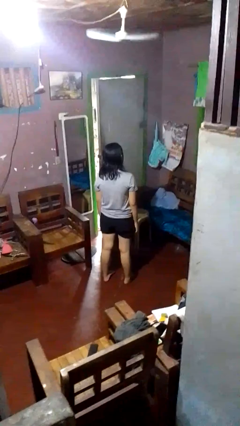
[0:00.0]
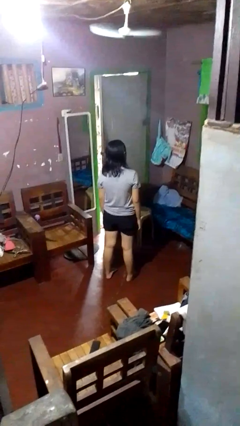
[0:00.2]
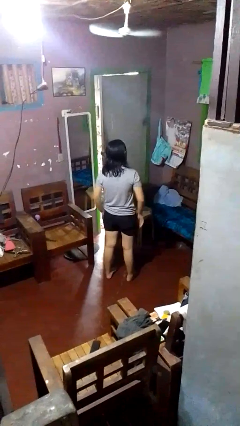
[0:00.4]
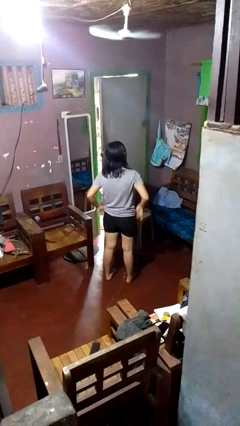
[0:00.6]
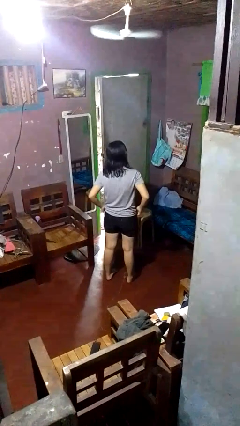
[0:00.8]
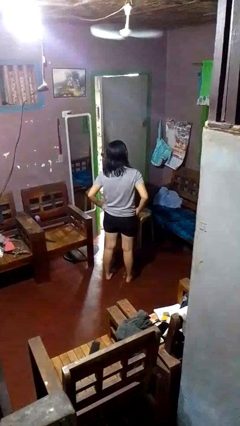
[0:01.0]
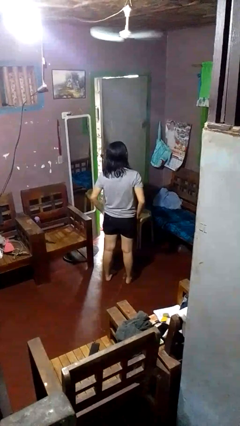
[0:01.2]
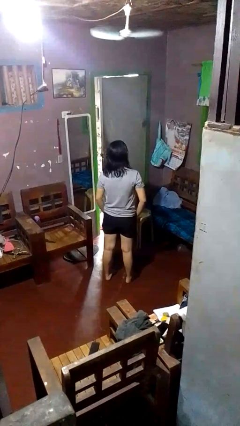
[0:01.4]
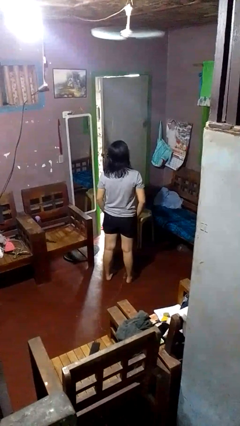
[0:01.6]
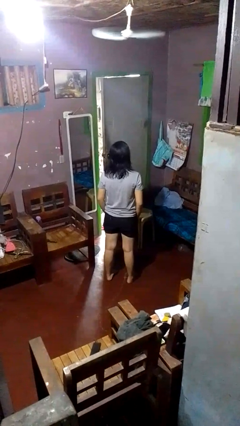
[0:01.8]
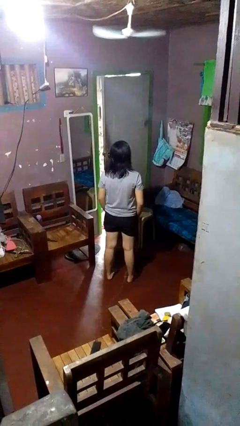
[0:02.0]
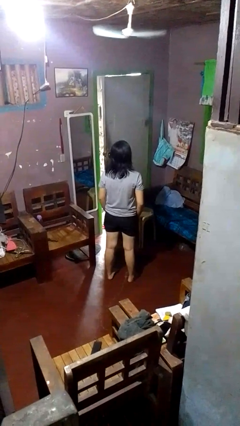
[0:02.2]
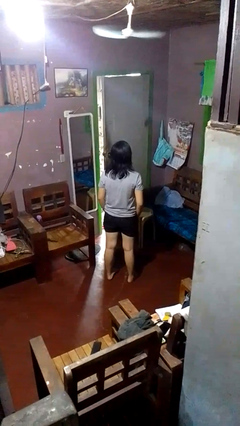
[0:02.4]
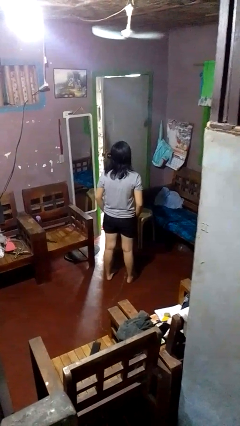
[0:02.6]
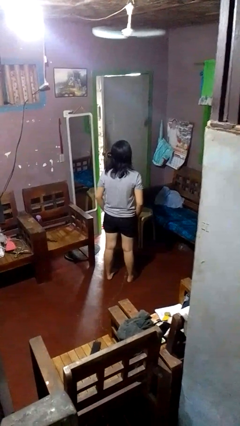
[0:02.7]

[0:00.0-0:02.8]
person puts hands in back pockets

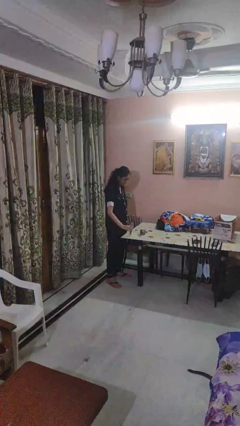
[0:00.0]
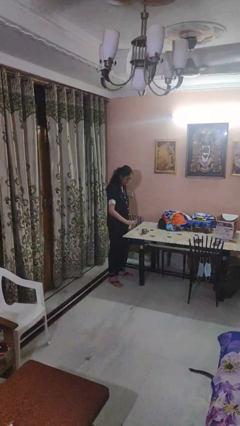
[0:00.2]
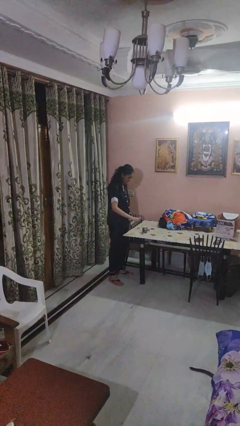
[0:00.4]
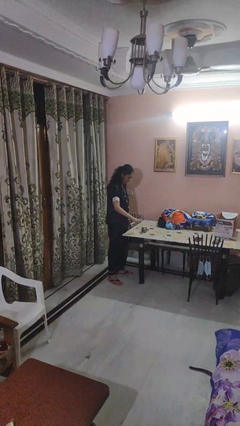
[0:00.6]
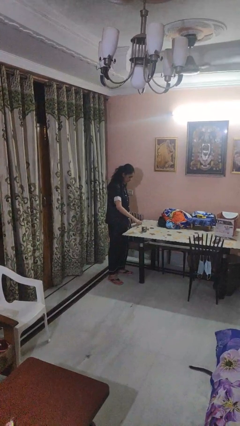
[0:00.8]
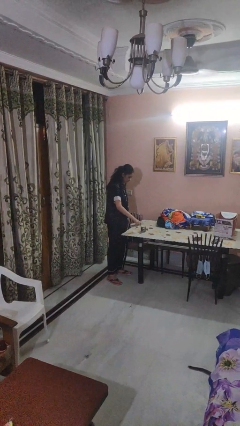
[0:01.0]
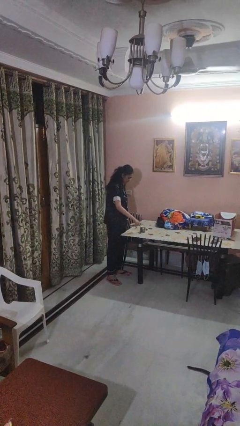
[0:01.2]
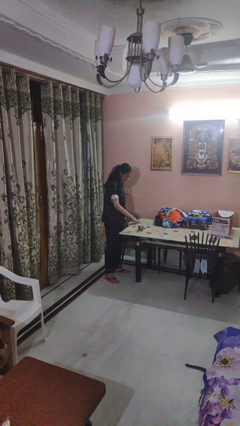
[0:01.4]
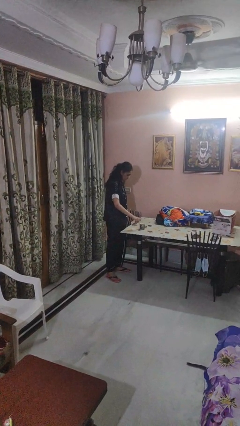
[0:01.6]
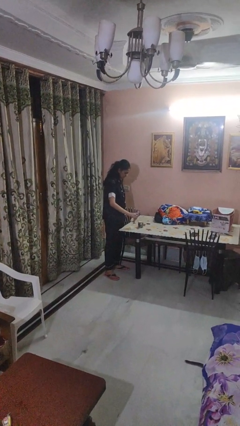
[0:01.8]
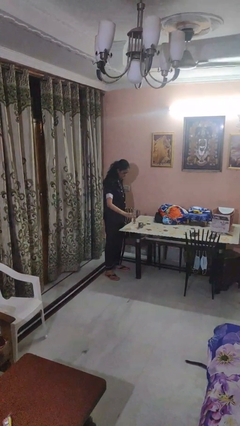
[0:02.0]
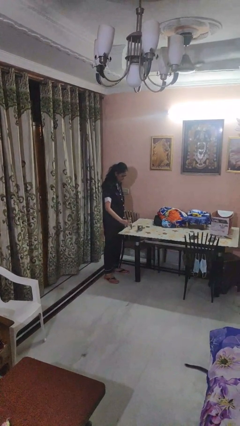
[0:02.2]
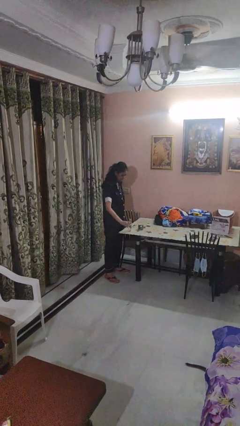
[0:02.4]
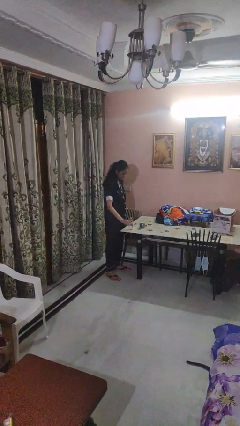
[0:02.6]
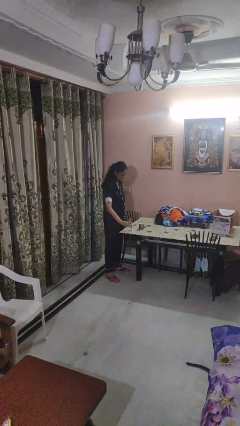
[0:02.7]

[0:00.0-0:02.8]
person pours liquid into cup

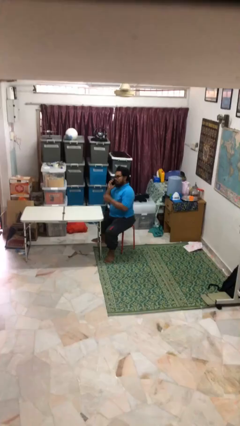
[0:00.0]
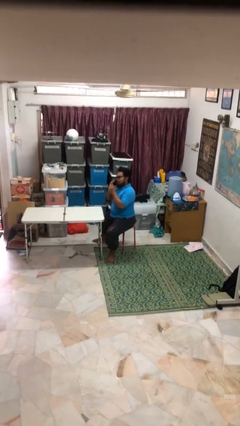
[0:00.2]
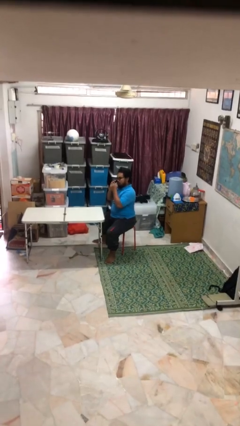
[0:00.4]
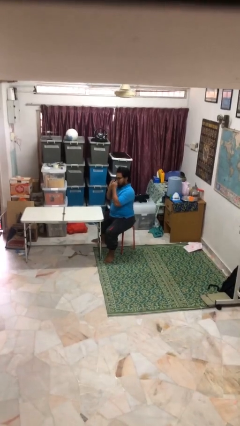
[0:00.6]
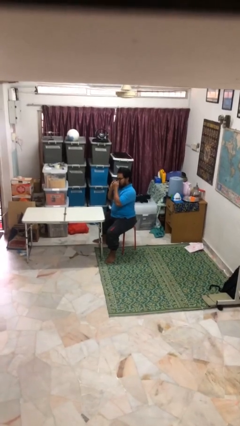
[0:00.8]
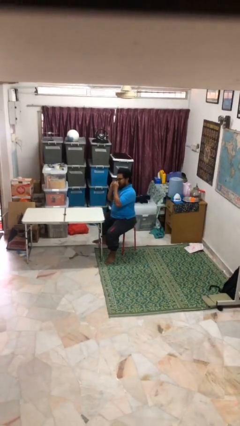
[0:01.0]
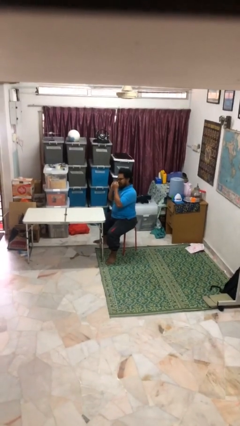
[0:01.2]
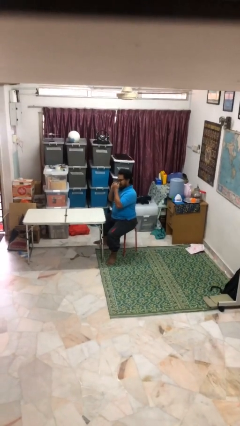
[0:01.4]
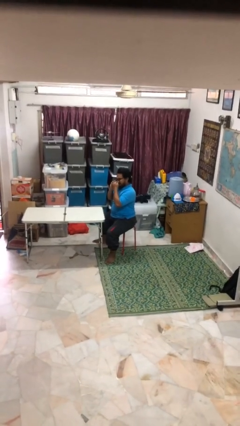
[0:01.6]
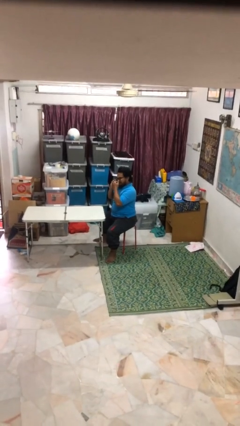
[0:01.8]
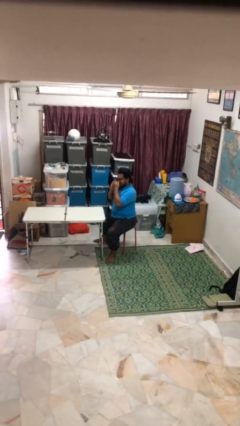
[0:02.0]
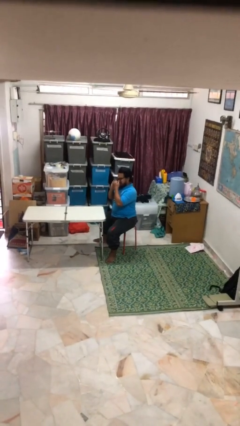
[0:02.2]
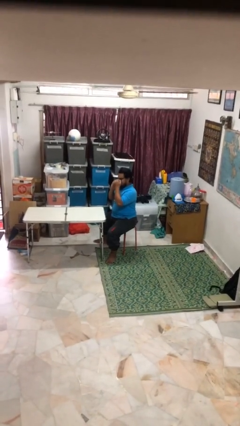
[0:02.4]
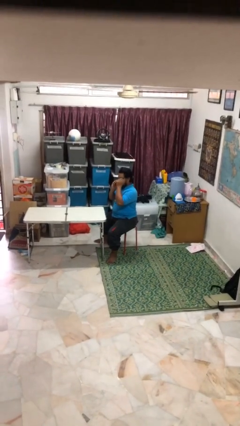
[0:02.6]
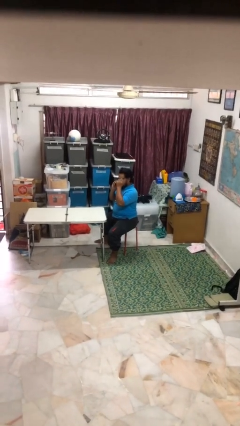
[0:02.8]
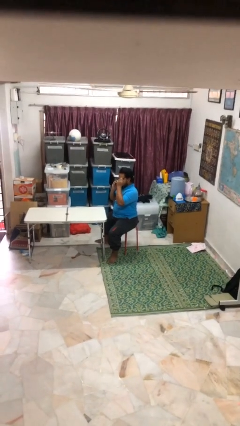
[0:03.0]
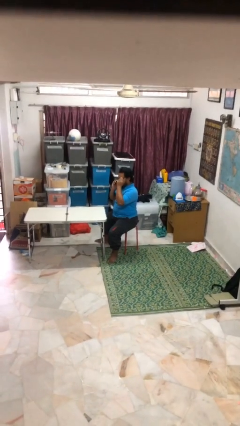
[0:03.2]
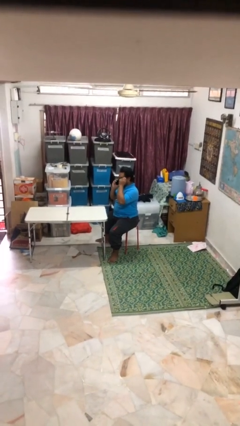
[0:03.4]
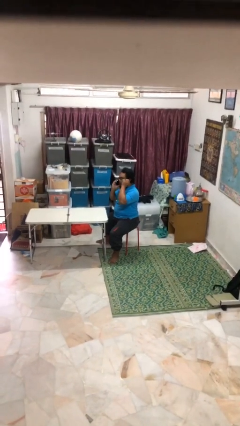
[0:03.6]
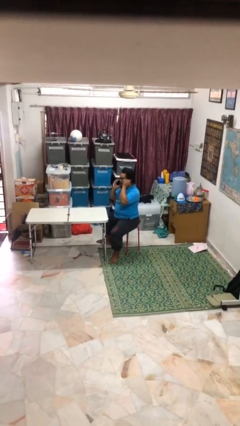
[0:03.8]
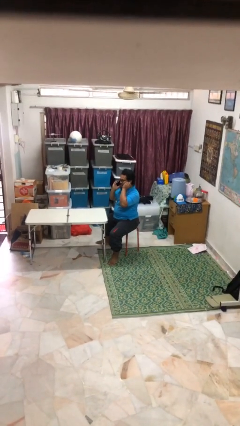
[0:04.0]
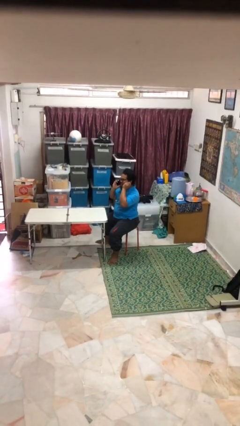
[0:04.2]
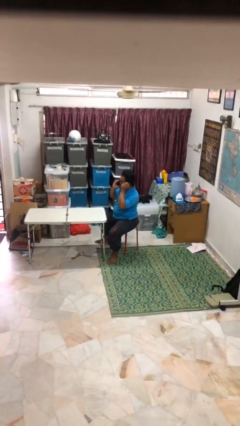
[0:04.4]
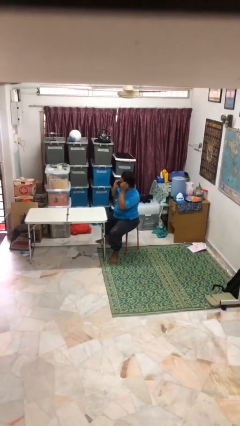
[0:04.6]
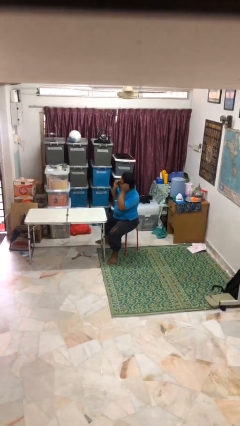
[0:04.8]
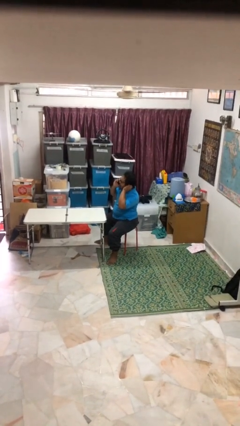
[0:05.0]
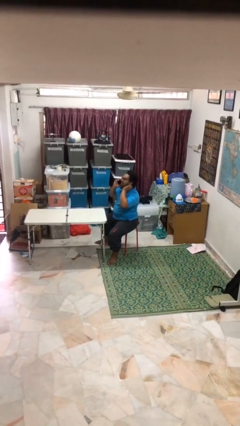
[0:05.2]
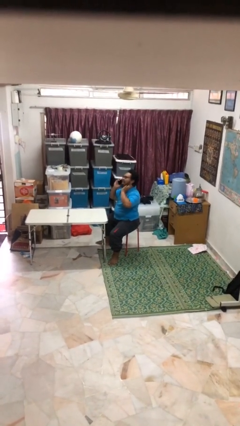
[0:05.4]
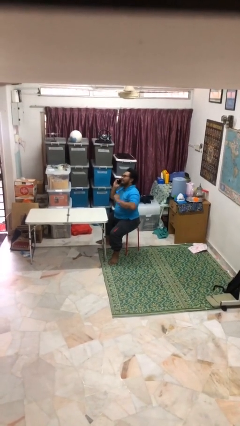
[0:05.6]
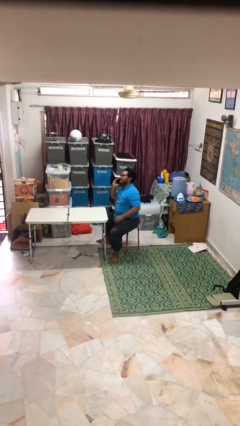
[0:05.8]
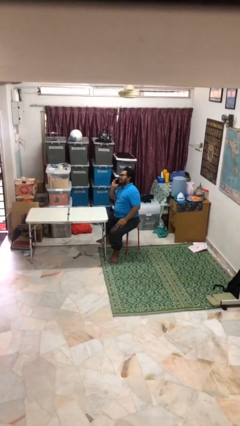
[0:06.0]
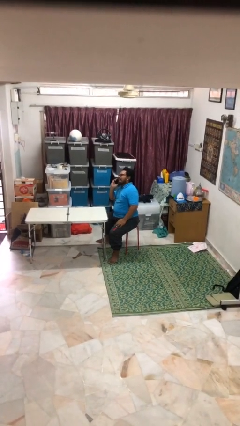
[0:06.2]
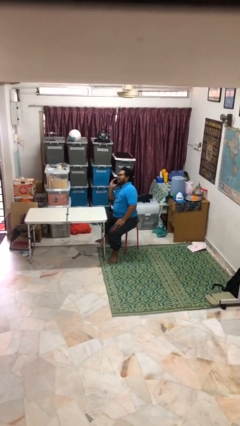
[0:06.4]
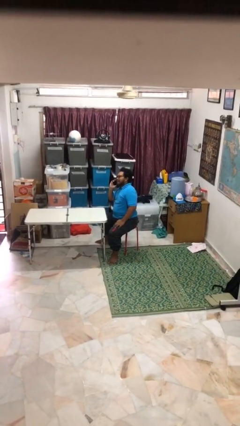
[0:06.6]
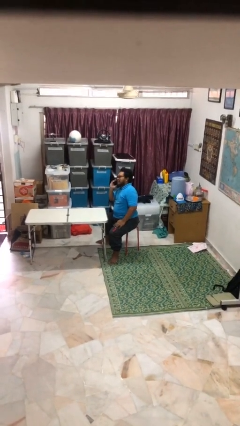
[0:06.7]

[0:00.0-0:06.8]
person talks on phone

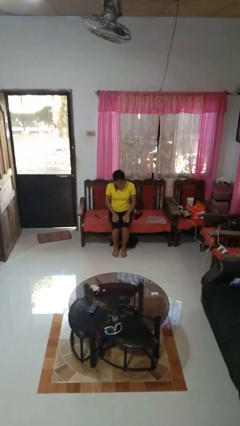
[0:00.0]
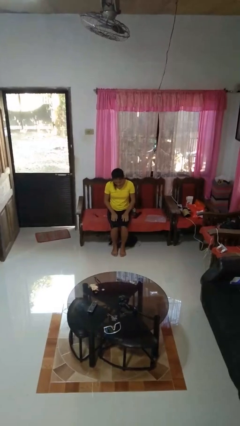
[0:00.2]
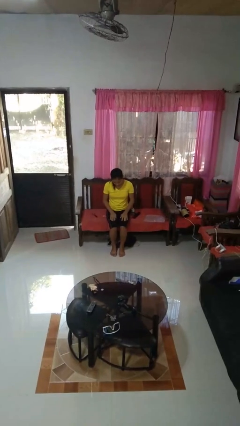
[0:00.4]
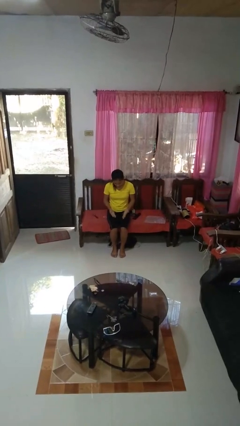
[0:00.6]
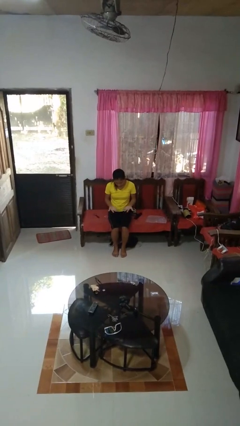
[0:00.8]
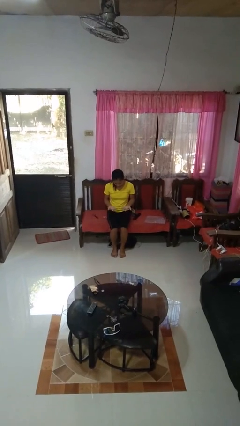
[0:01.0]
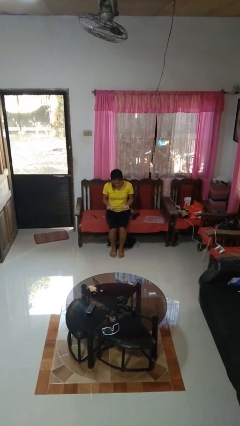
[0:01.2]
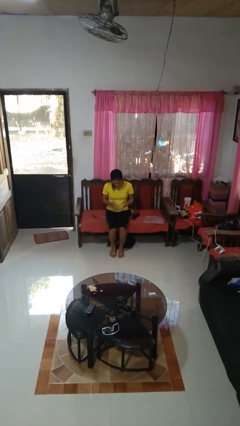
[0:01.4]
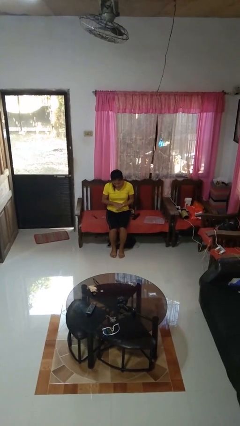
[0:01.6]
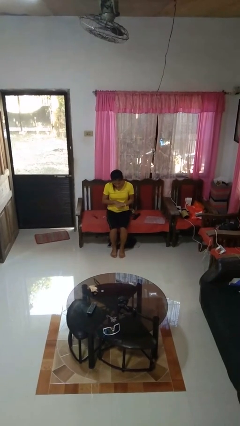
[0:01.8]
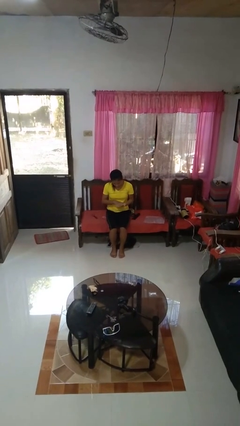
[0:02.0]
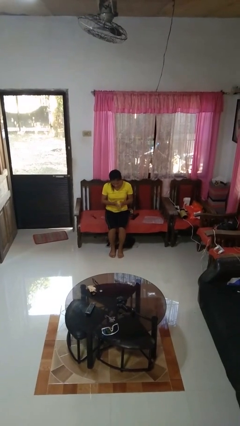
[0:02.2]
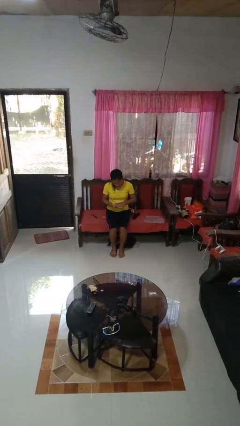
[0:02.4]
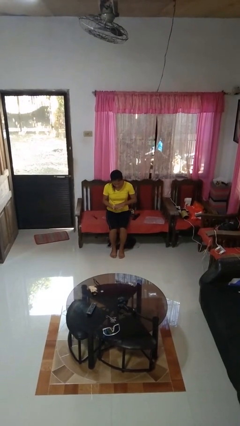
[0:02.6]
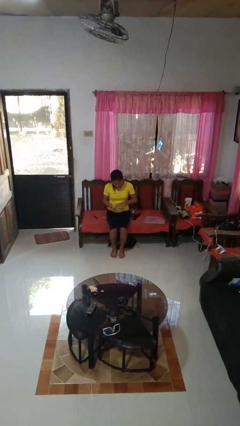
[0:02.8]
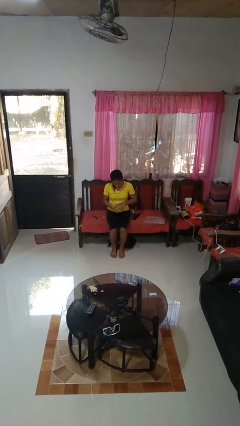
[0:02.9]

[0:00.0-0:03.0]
person looks at hands in lap

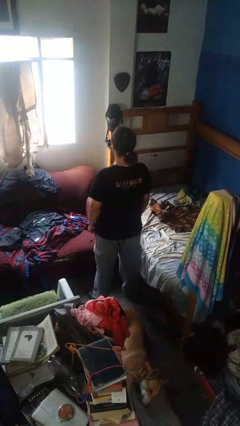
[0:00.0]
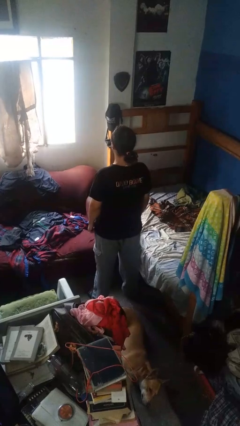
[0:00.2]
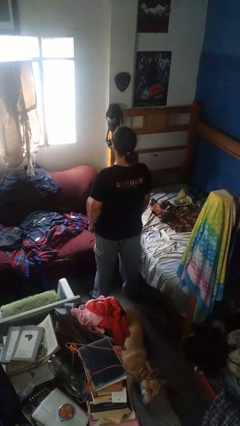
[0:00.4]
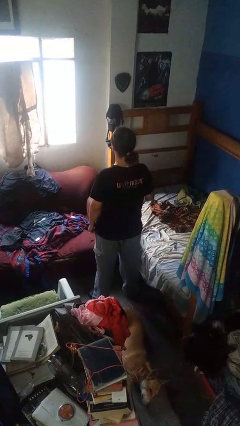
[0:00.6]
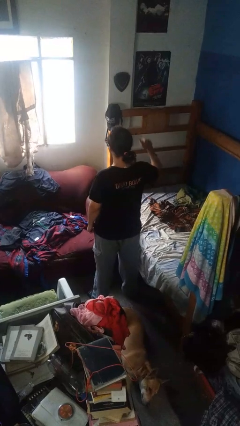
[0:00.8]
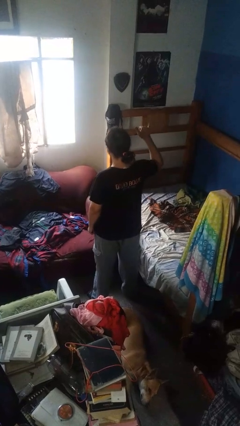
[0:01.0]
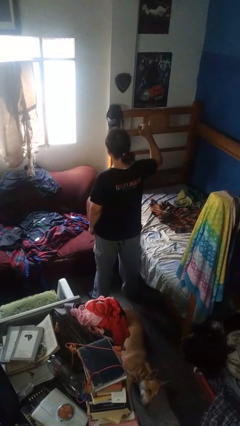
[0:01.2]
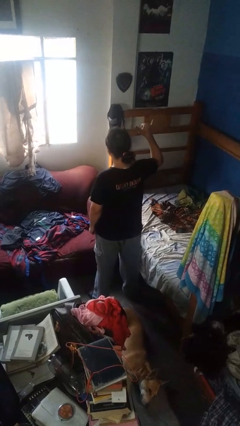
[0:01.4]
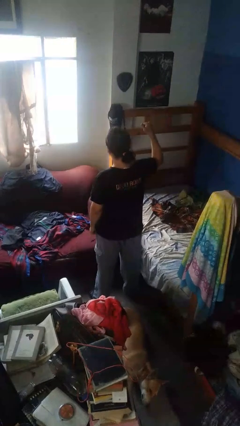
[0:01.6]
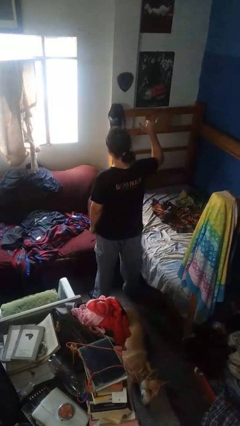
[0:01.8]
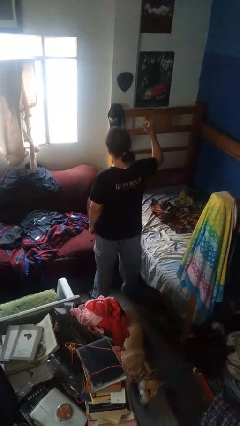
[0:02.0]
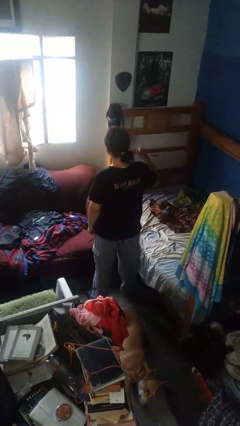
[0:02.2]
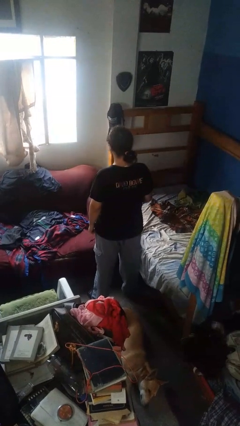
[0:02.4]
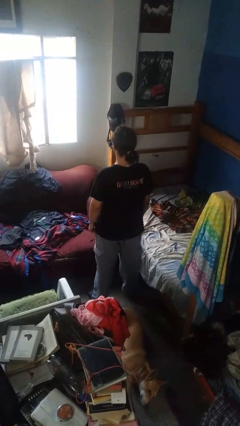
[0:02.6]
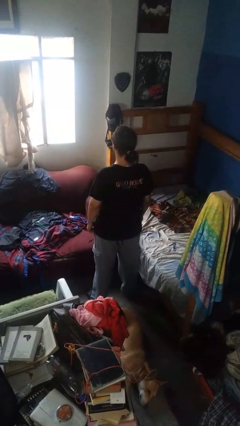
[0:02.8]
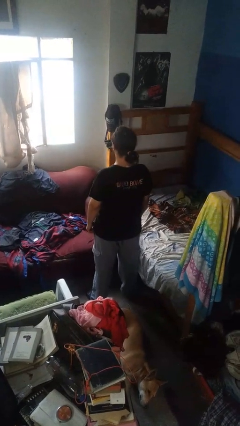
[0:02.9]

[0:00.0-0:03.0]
person gestures hang loose
